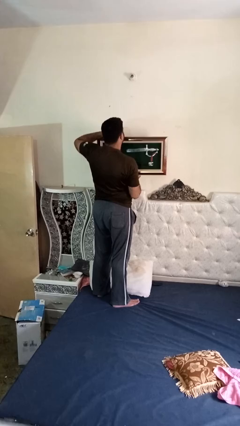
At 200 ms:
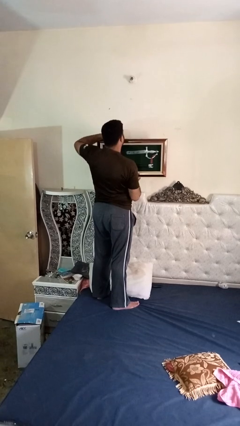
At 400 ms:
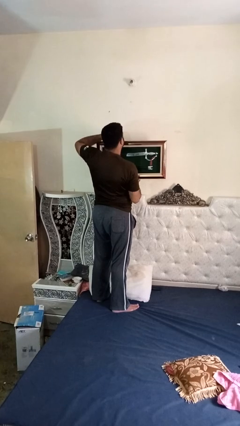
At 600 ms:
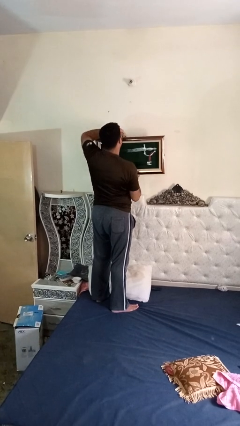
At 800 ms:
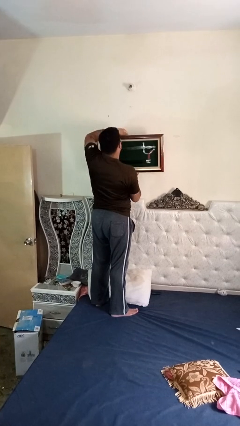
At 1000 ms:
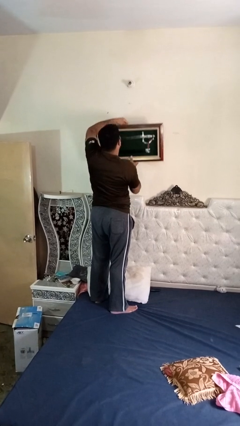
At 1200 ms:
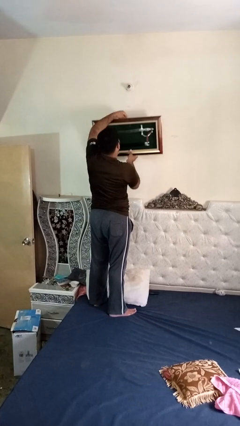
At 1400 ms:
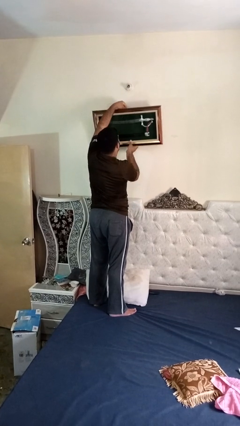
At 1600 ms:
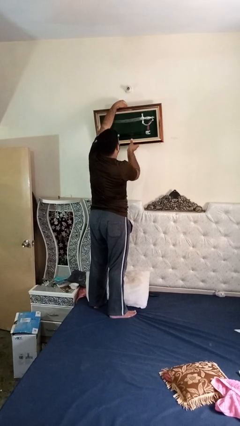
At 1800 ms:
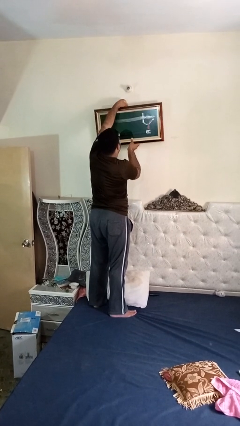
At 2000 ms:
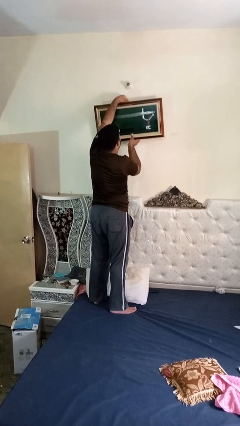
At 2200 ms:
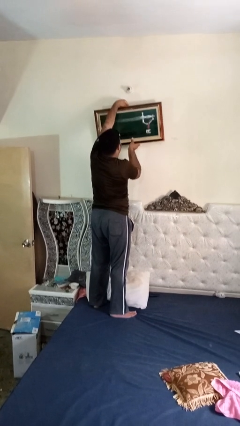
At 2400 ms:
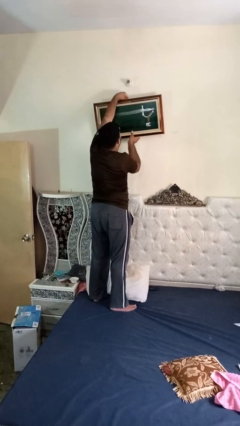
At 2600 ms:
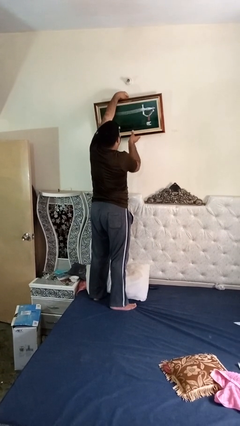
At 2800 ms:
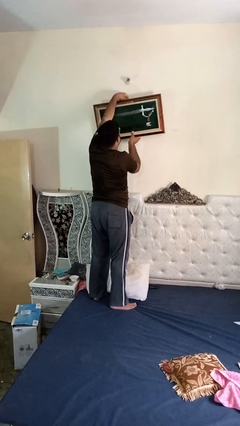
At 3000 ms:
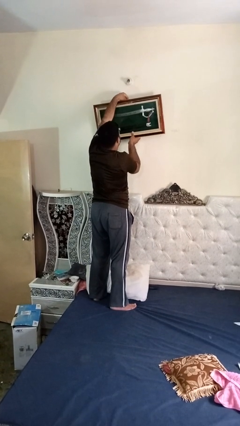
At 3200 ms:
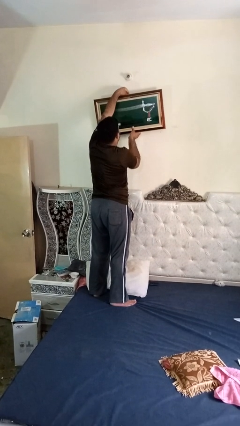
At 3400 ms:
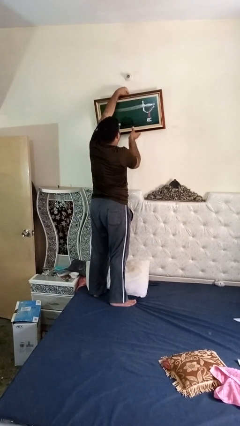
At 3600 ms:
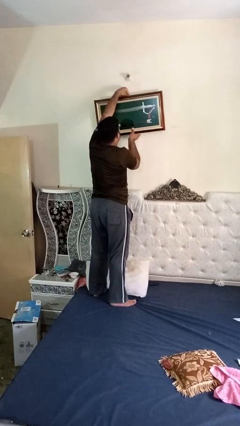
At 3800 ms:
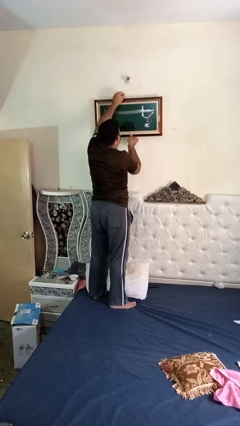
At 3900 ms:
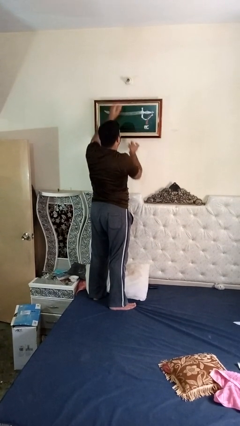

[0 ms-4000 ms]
person puts up picture frame

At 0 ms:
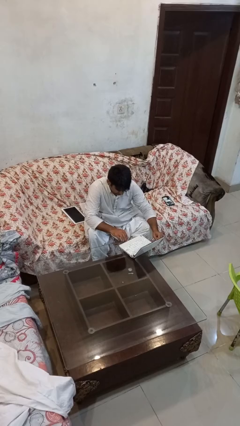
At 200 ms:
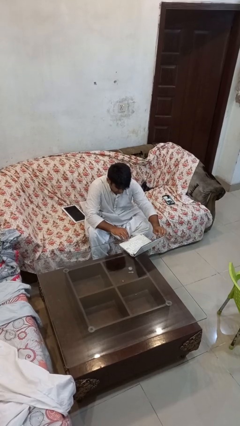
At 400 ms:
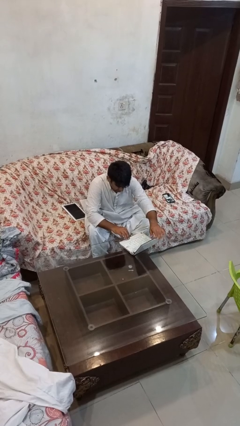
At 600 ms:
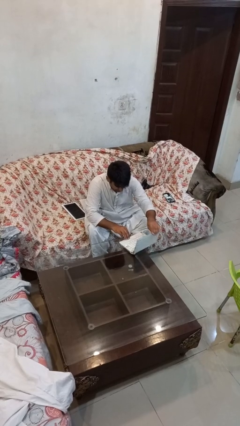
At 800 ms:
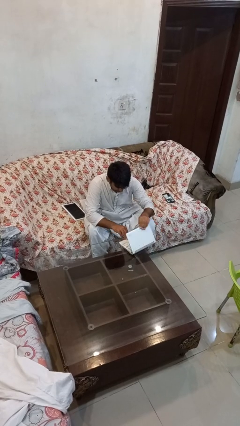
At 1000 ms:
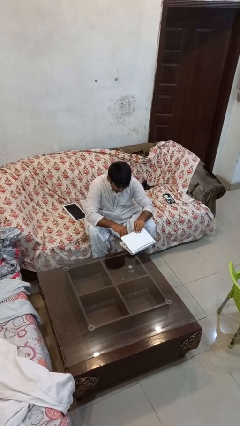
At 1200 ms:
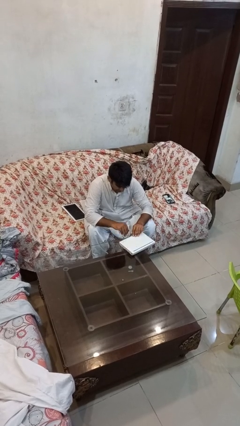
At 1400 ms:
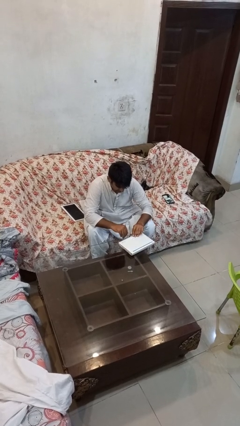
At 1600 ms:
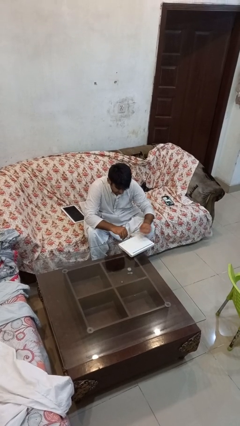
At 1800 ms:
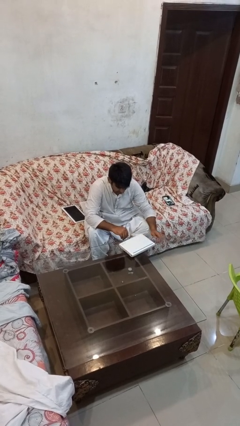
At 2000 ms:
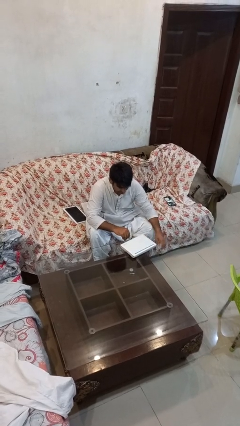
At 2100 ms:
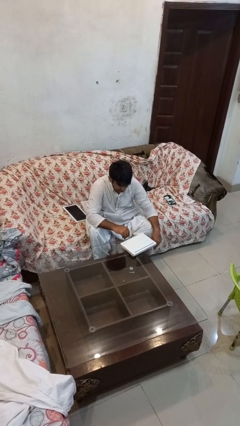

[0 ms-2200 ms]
person closes laptop

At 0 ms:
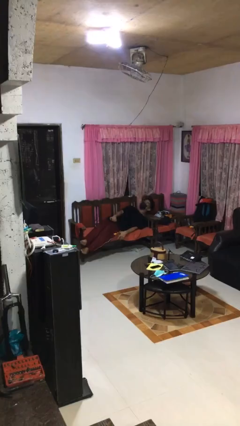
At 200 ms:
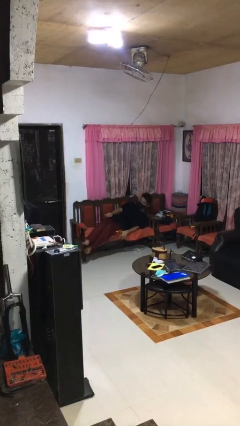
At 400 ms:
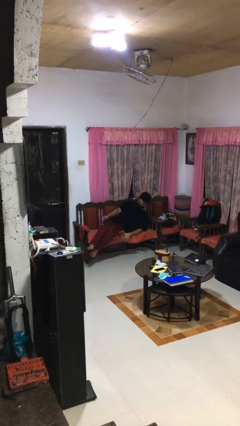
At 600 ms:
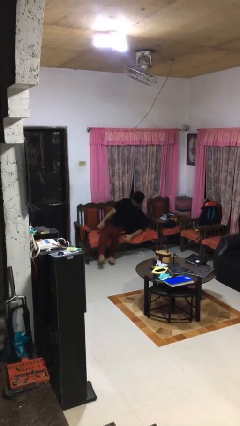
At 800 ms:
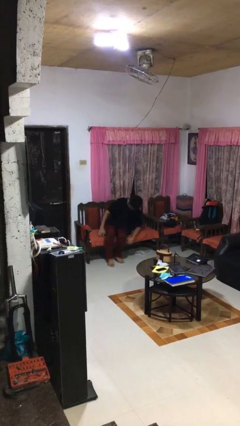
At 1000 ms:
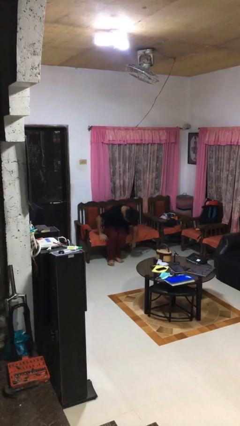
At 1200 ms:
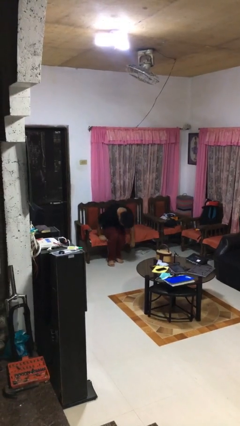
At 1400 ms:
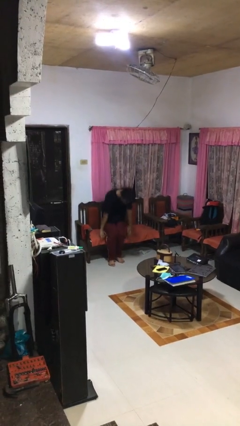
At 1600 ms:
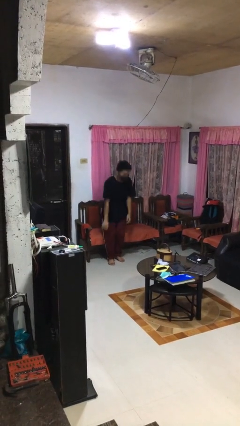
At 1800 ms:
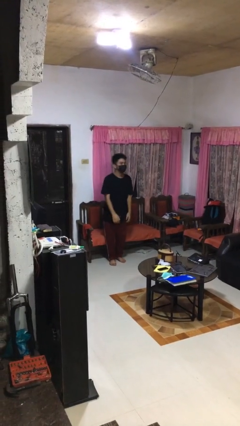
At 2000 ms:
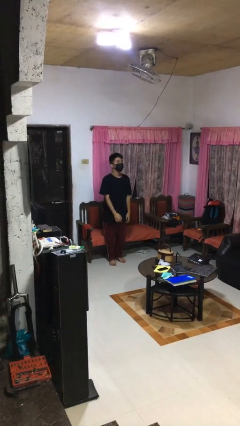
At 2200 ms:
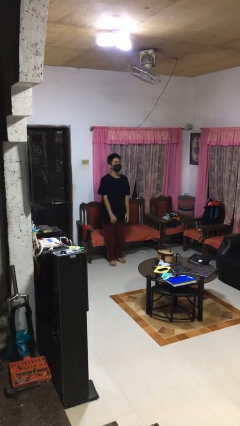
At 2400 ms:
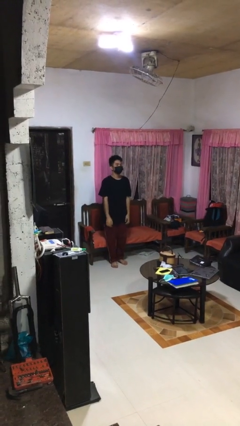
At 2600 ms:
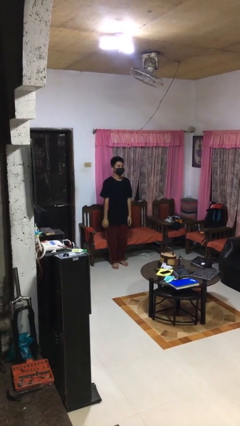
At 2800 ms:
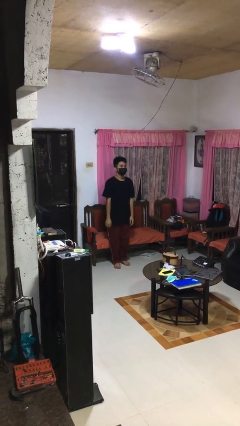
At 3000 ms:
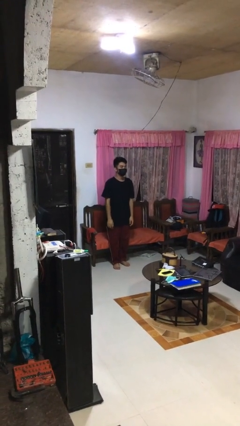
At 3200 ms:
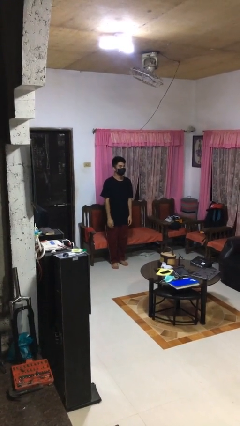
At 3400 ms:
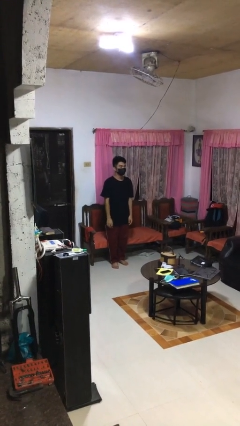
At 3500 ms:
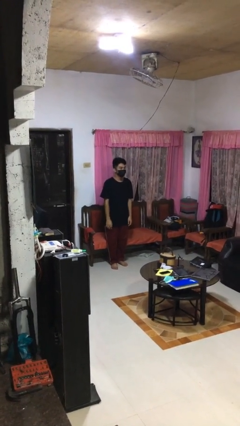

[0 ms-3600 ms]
person stands up

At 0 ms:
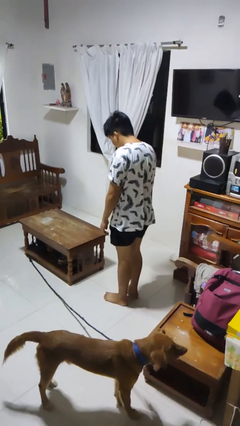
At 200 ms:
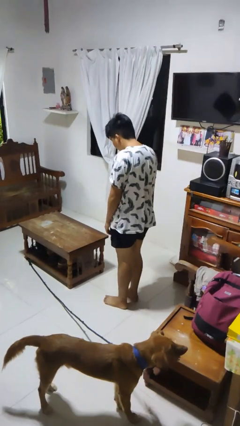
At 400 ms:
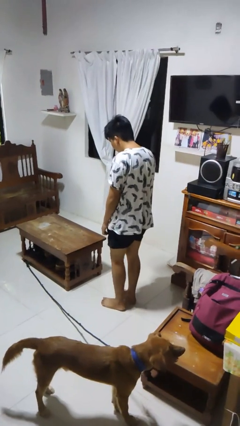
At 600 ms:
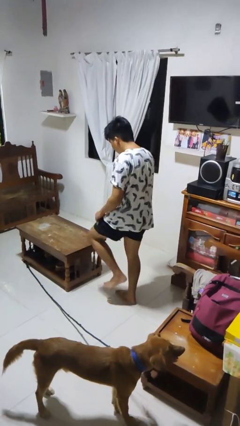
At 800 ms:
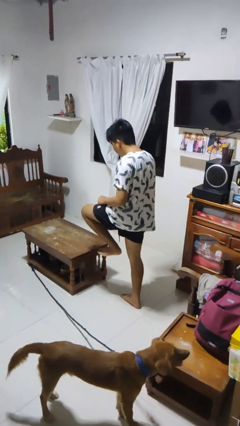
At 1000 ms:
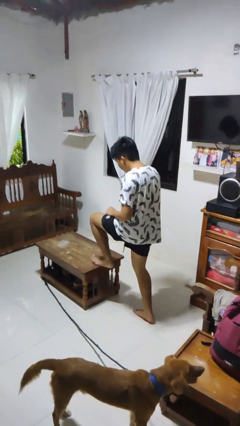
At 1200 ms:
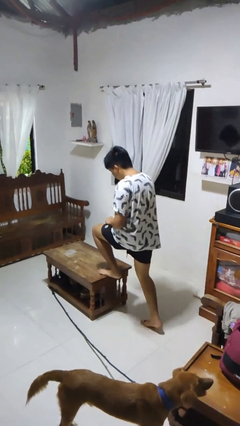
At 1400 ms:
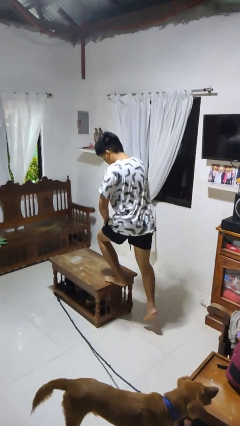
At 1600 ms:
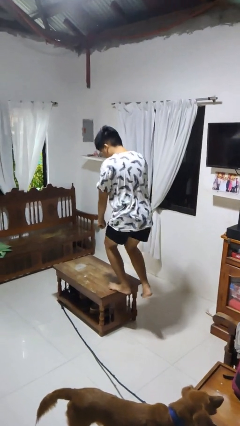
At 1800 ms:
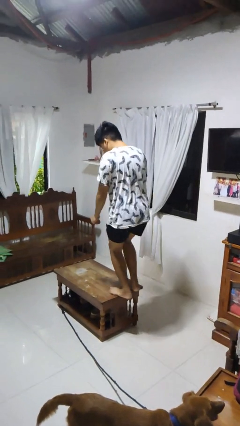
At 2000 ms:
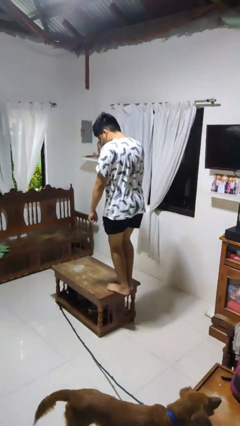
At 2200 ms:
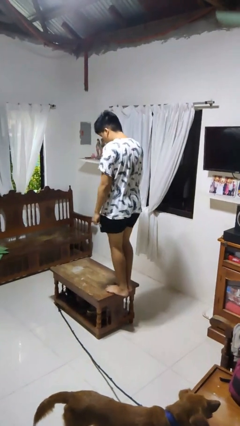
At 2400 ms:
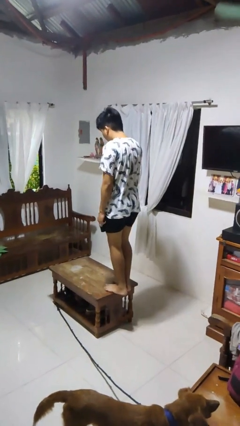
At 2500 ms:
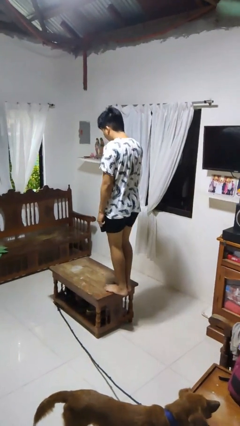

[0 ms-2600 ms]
person climbs on table

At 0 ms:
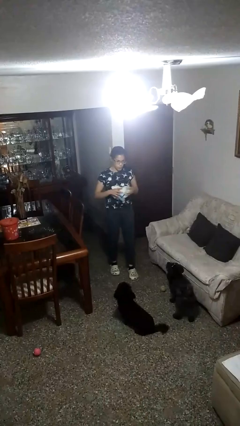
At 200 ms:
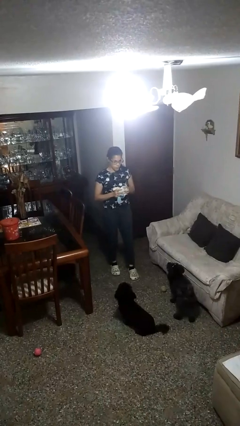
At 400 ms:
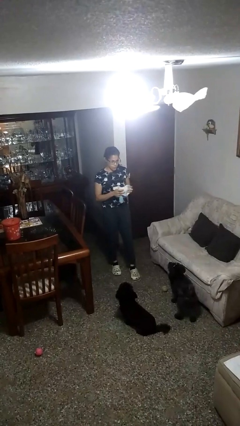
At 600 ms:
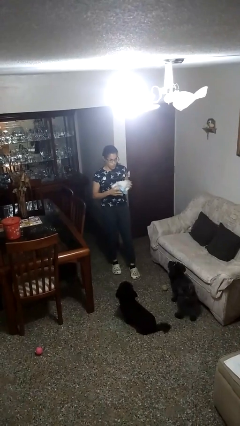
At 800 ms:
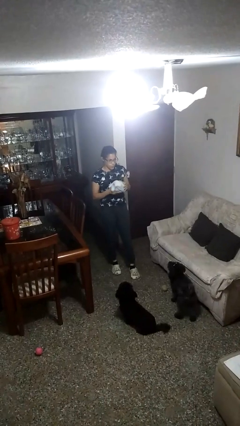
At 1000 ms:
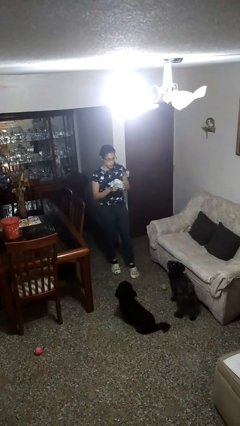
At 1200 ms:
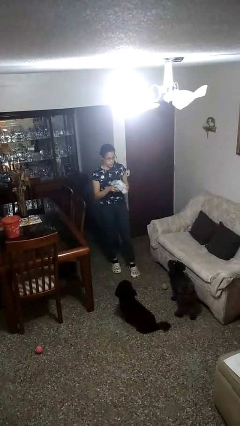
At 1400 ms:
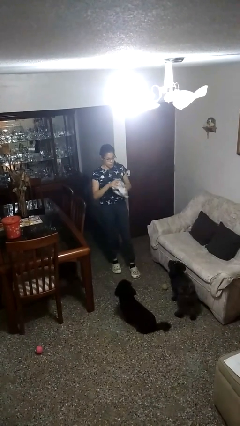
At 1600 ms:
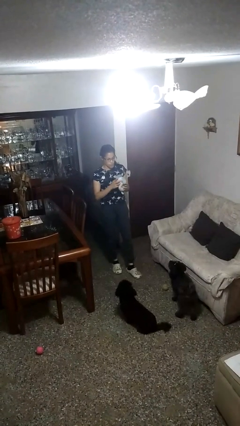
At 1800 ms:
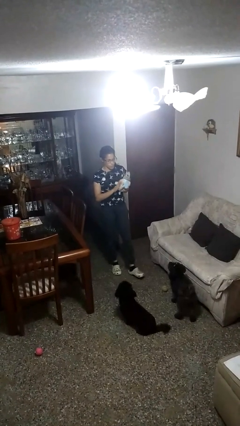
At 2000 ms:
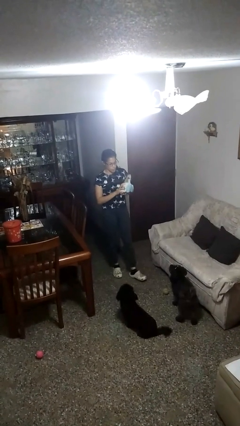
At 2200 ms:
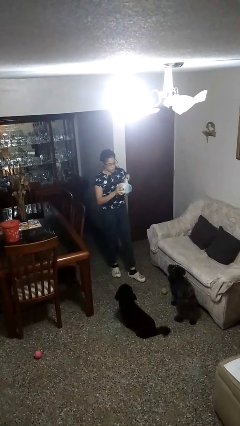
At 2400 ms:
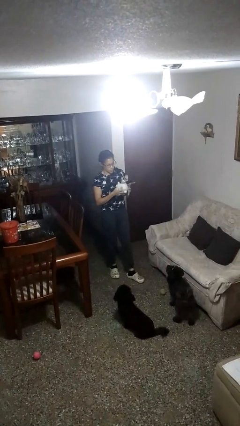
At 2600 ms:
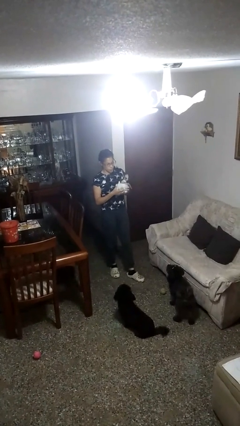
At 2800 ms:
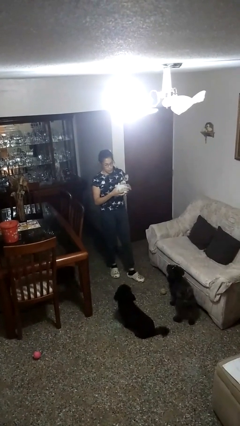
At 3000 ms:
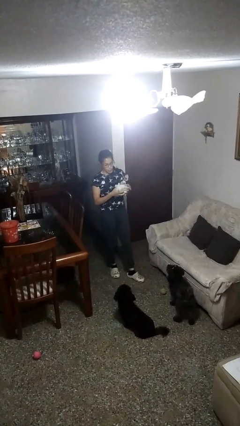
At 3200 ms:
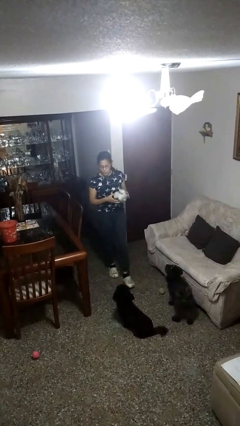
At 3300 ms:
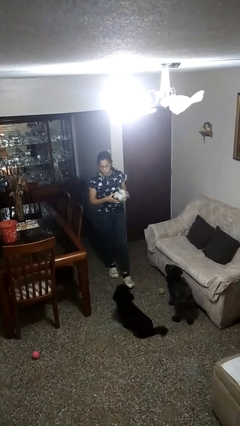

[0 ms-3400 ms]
person squeezes object

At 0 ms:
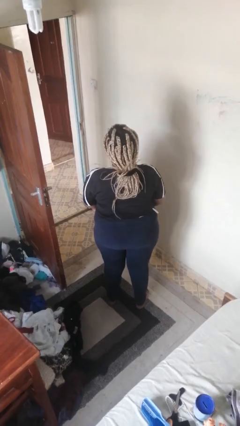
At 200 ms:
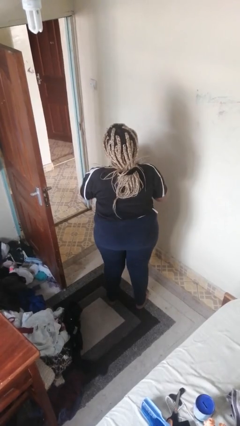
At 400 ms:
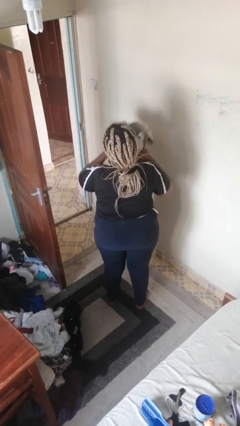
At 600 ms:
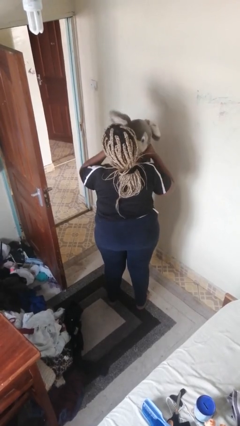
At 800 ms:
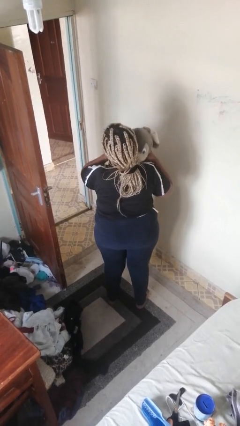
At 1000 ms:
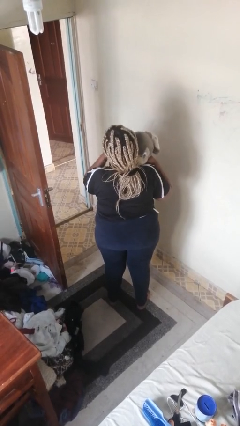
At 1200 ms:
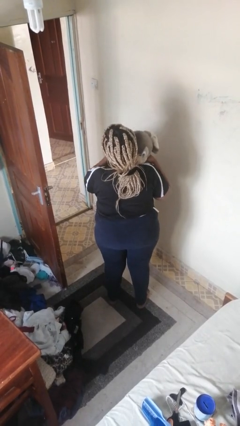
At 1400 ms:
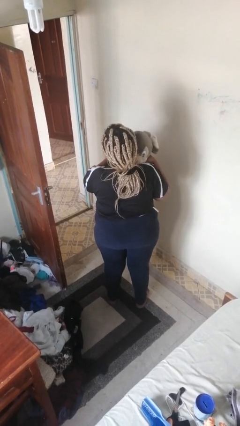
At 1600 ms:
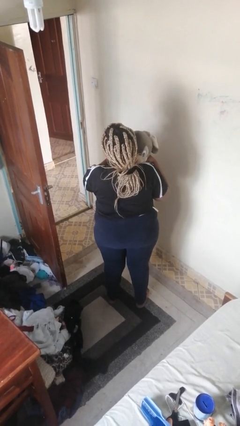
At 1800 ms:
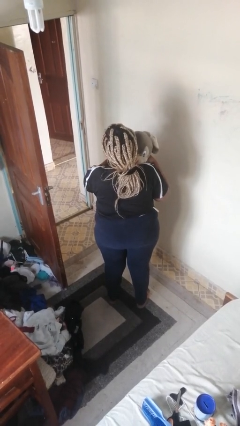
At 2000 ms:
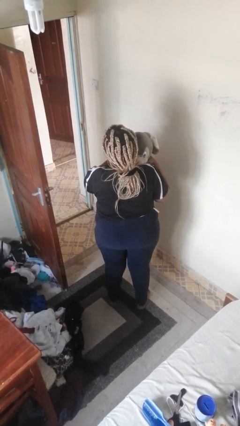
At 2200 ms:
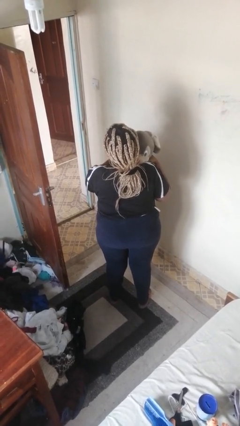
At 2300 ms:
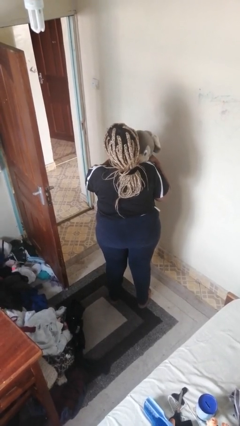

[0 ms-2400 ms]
person hugs stuffed animal
